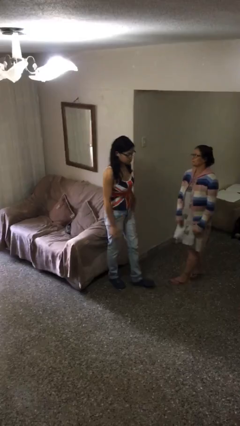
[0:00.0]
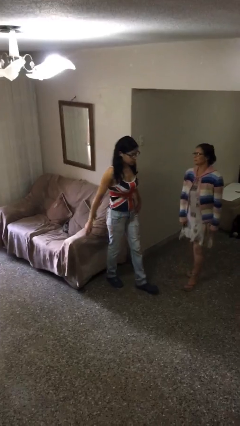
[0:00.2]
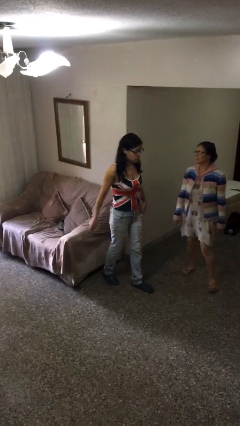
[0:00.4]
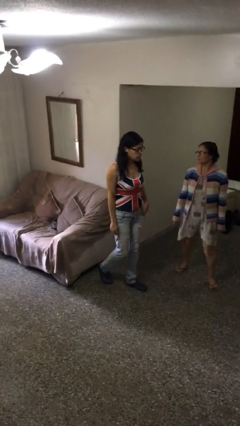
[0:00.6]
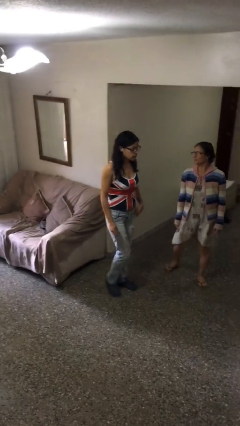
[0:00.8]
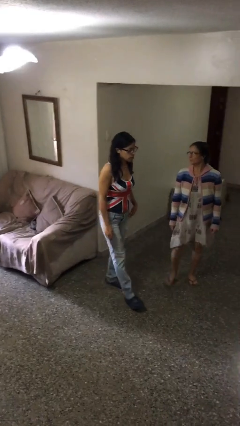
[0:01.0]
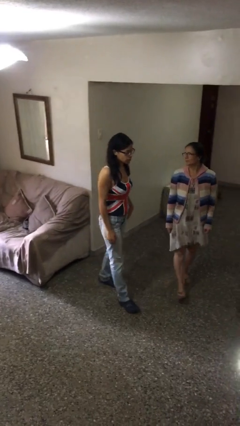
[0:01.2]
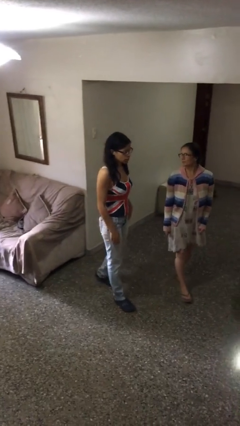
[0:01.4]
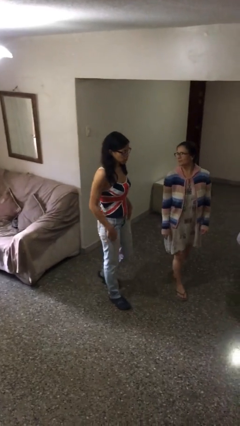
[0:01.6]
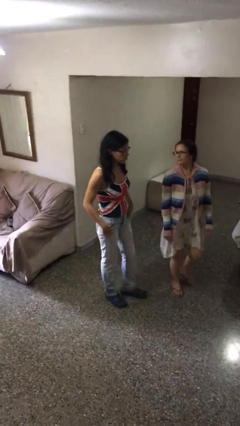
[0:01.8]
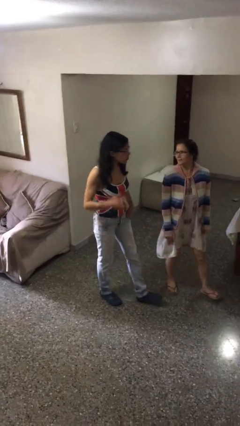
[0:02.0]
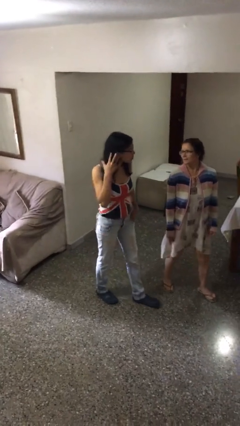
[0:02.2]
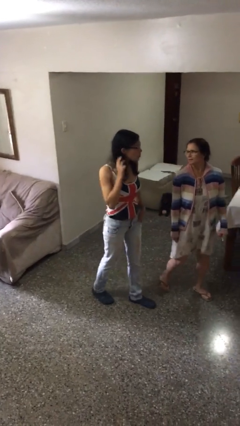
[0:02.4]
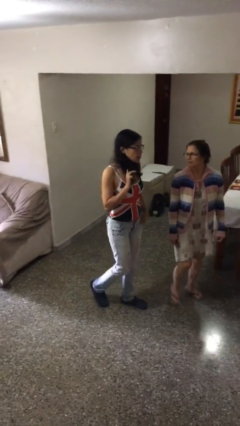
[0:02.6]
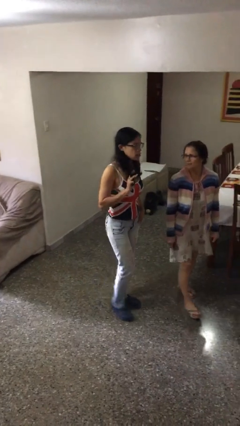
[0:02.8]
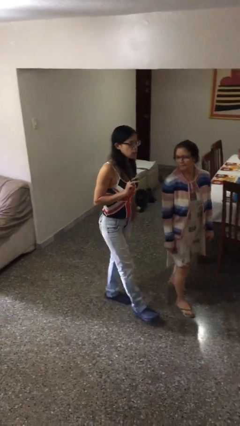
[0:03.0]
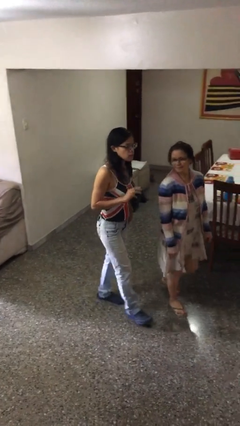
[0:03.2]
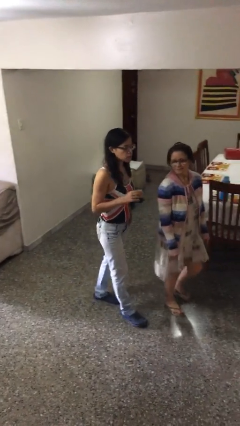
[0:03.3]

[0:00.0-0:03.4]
person talks to person

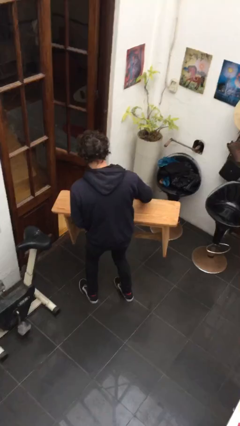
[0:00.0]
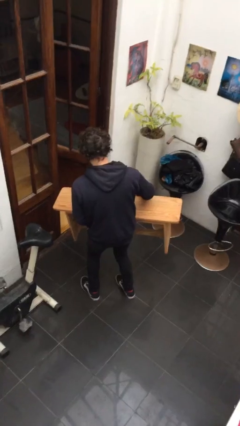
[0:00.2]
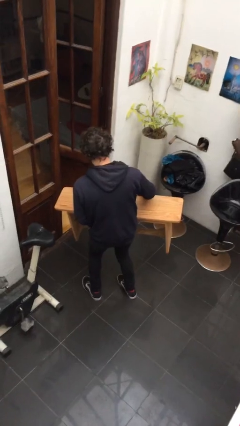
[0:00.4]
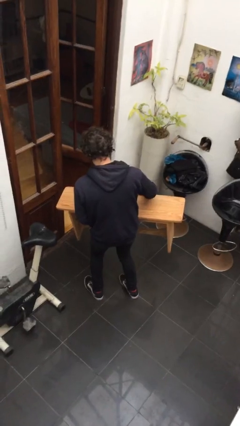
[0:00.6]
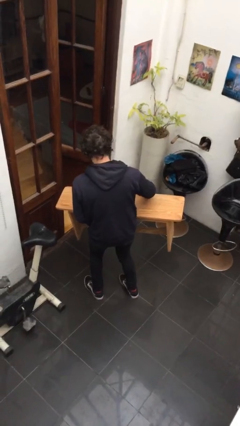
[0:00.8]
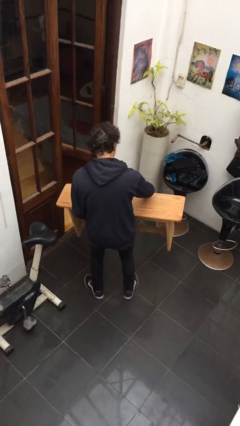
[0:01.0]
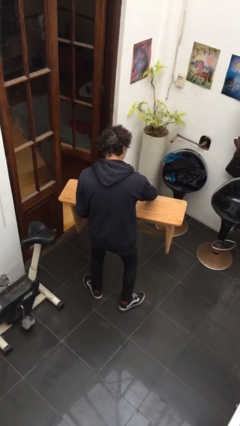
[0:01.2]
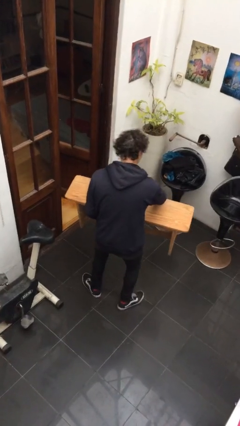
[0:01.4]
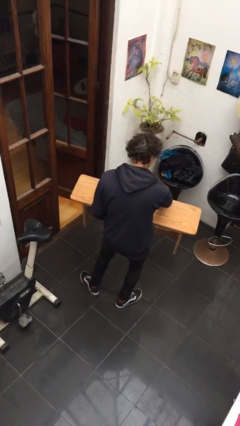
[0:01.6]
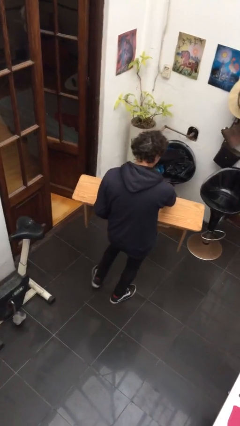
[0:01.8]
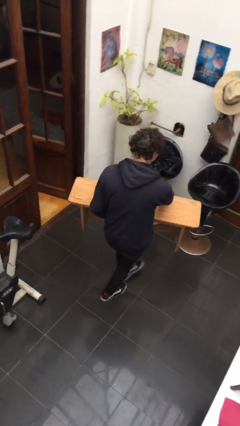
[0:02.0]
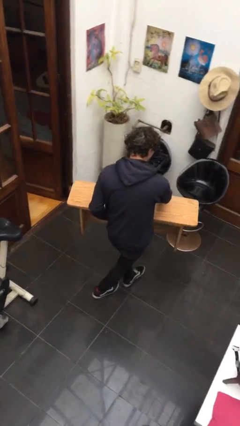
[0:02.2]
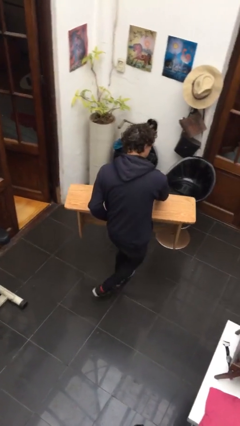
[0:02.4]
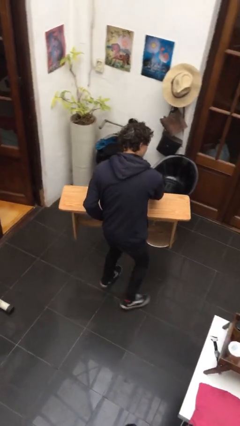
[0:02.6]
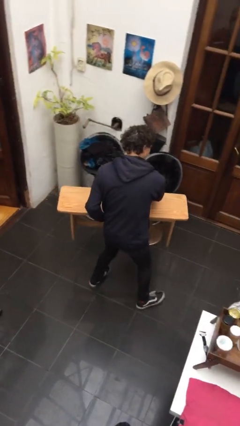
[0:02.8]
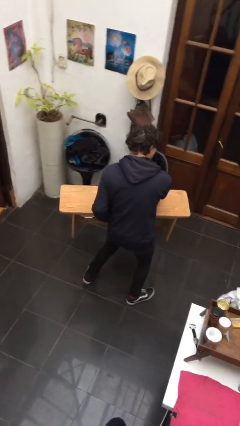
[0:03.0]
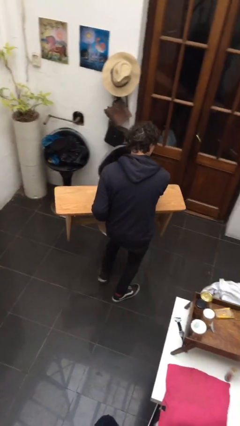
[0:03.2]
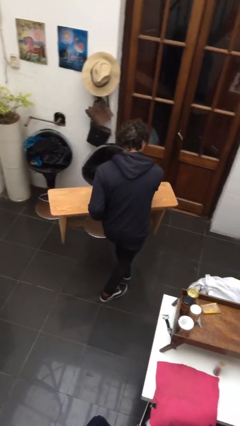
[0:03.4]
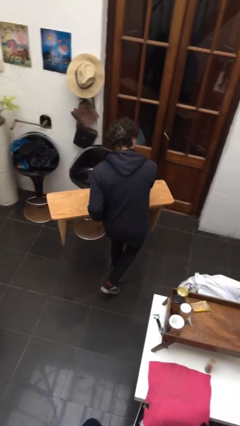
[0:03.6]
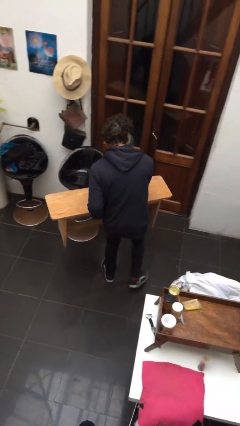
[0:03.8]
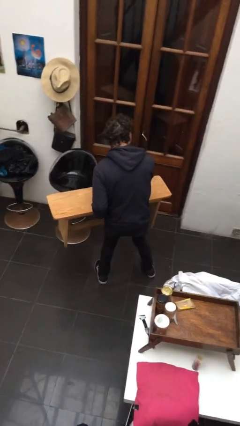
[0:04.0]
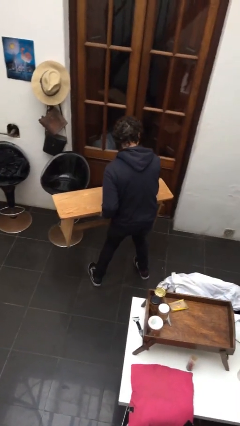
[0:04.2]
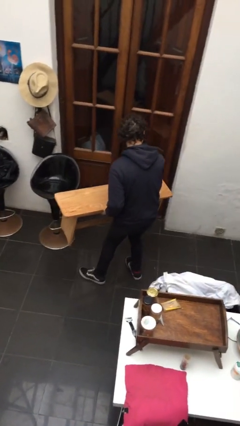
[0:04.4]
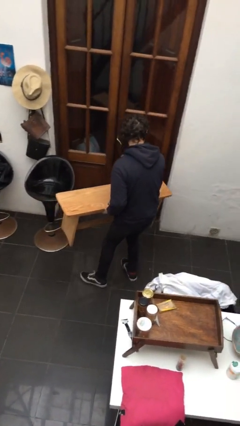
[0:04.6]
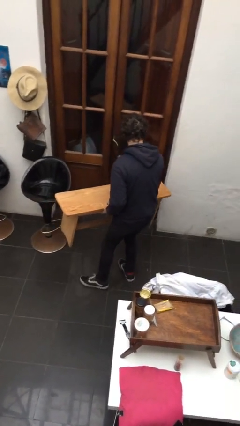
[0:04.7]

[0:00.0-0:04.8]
person carries furniture

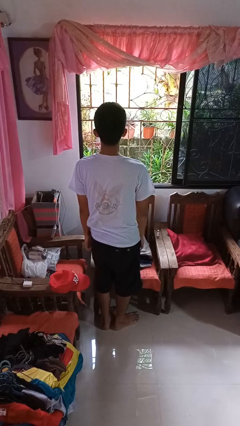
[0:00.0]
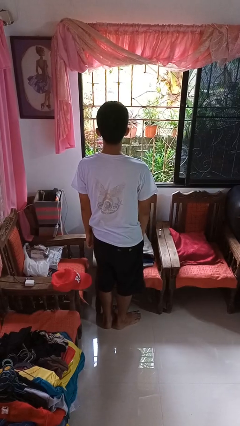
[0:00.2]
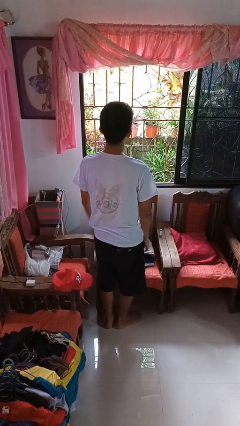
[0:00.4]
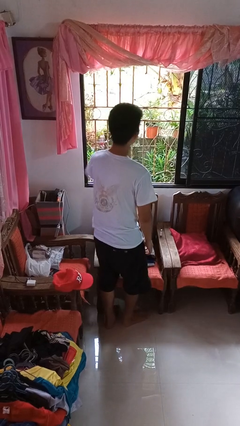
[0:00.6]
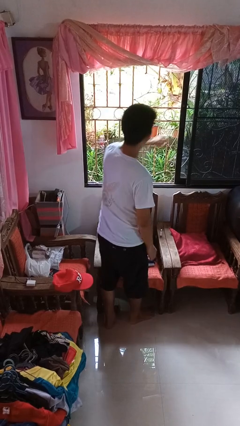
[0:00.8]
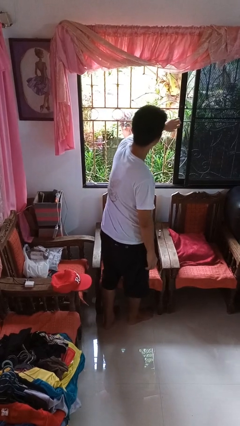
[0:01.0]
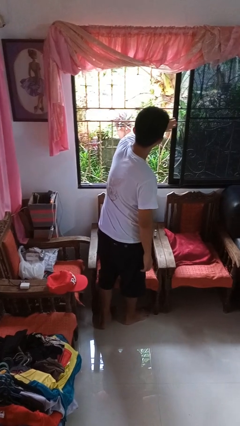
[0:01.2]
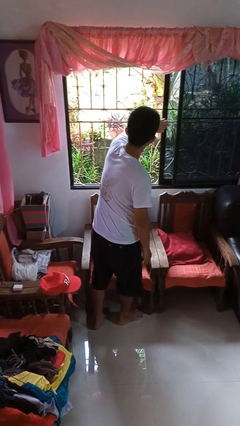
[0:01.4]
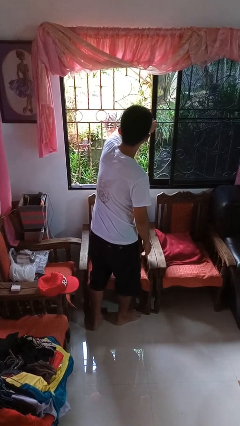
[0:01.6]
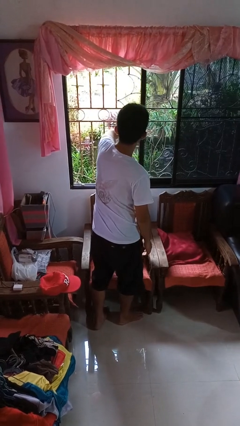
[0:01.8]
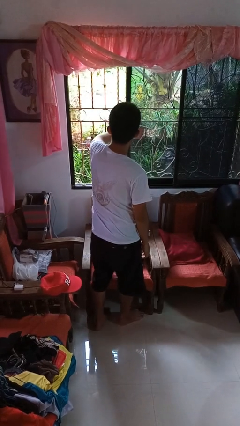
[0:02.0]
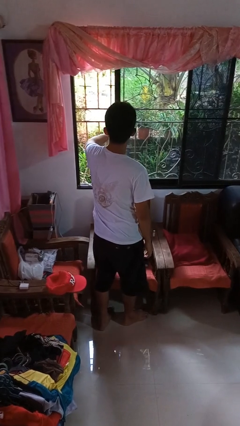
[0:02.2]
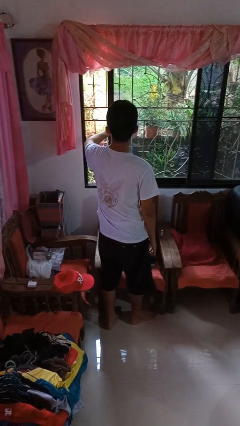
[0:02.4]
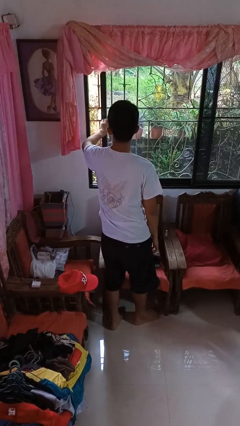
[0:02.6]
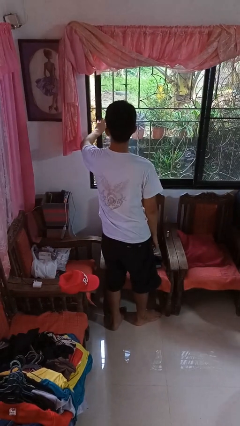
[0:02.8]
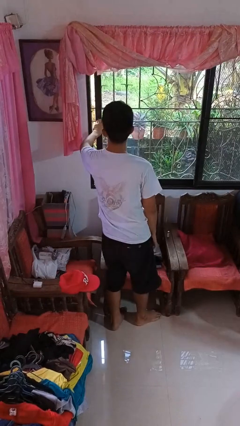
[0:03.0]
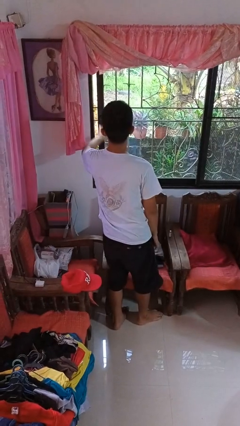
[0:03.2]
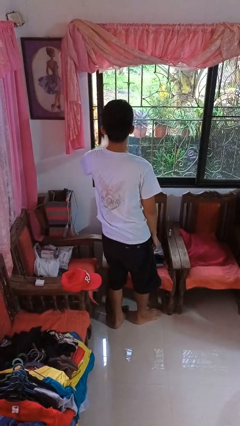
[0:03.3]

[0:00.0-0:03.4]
person closes home window

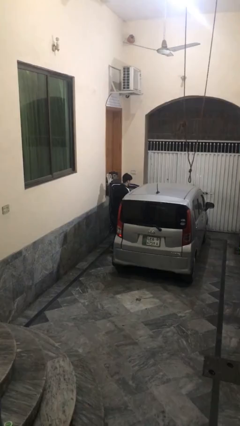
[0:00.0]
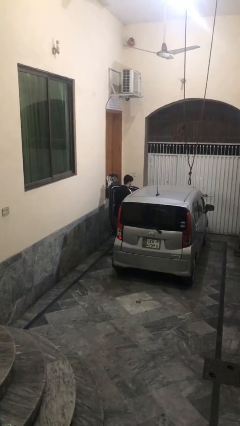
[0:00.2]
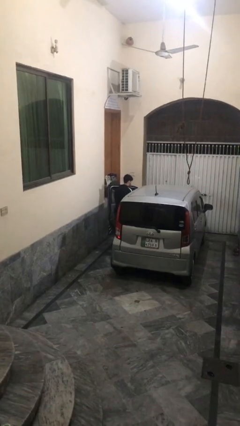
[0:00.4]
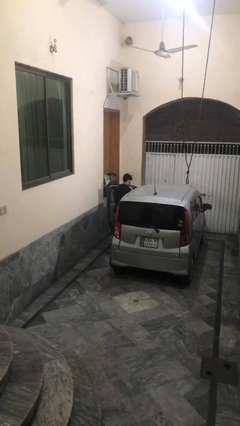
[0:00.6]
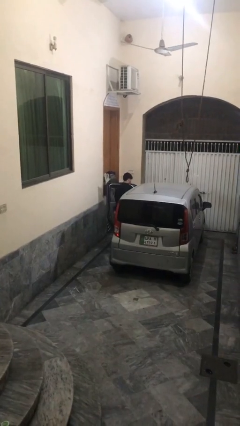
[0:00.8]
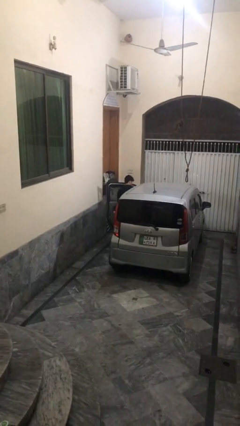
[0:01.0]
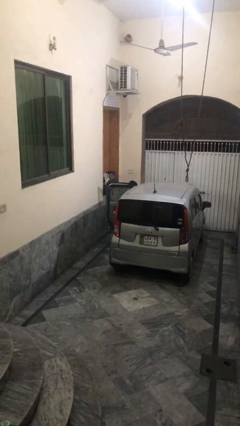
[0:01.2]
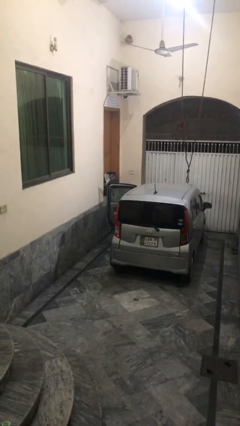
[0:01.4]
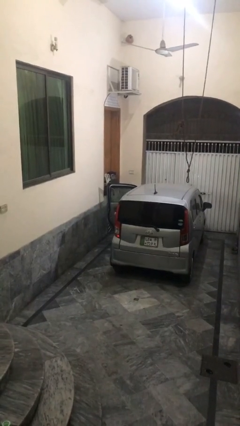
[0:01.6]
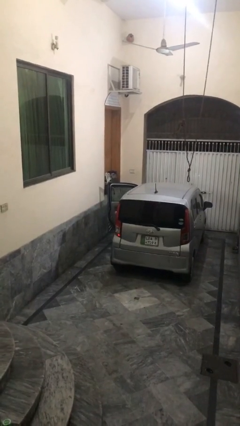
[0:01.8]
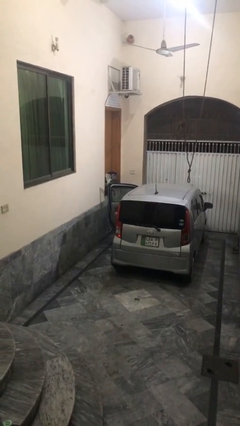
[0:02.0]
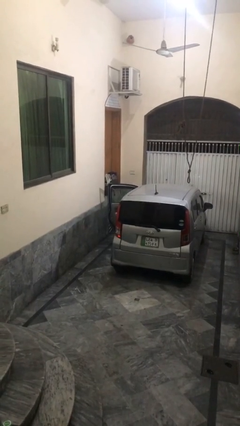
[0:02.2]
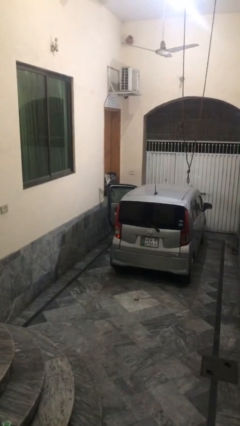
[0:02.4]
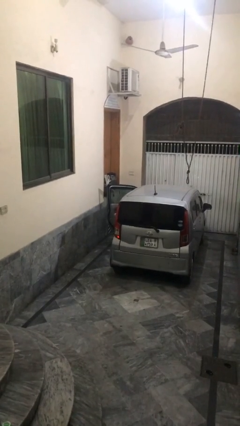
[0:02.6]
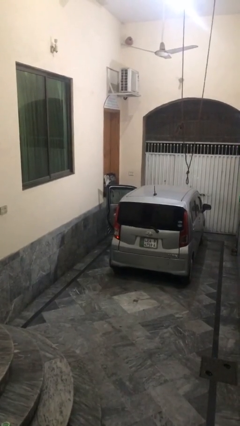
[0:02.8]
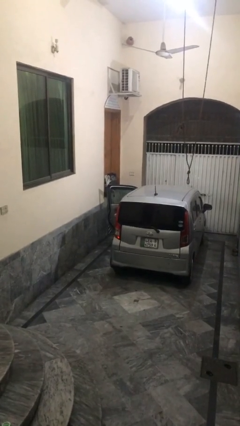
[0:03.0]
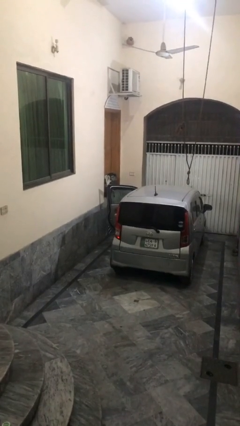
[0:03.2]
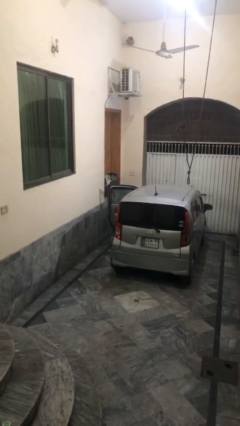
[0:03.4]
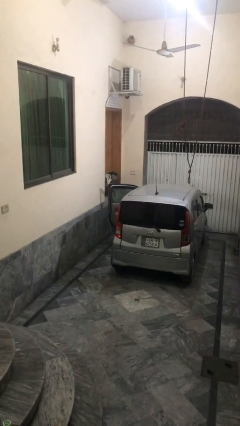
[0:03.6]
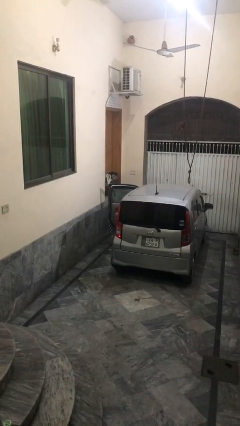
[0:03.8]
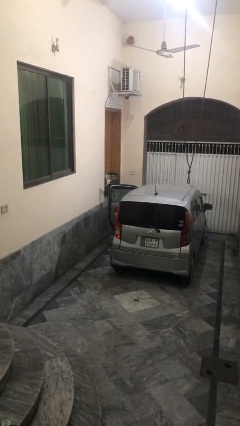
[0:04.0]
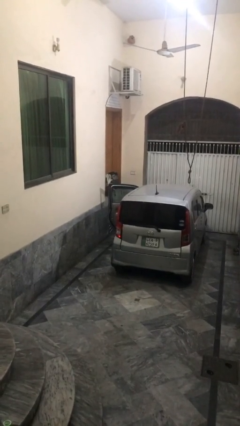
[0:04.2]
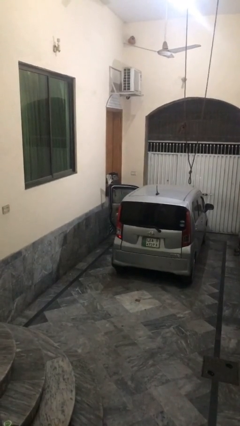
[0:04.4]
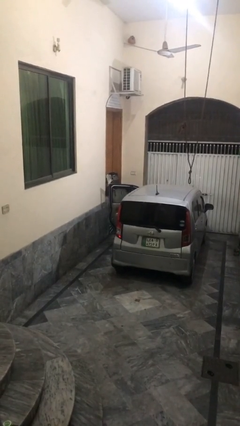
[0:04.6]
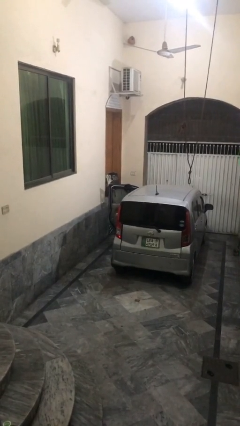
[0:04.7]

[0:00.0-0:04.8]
person enters car

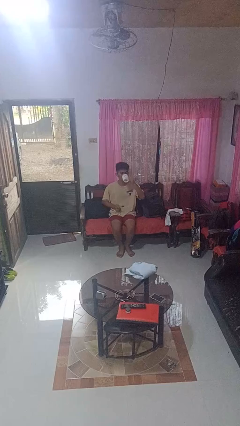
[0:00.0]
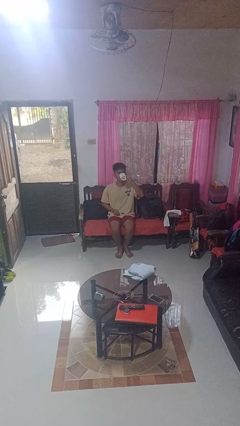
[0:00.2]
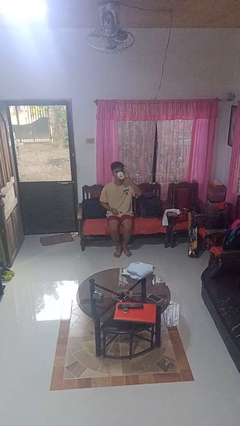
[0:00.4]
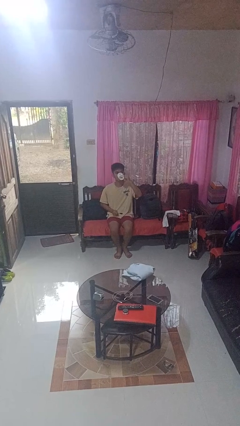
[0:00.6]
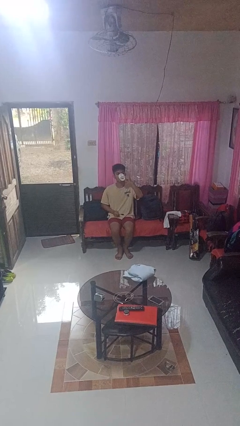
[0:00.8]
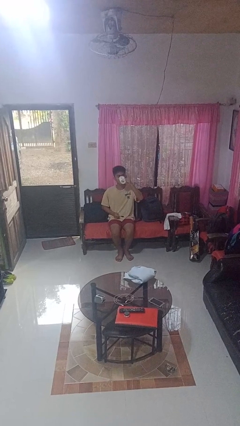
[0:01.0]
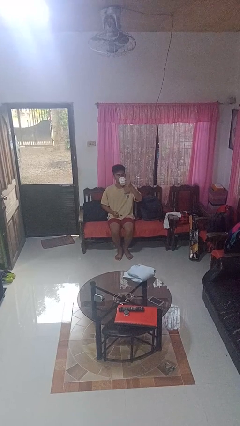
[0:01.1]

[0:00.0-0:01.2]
person drinks from mug
